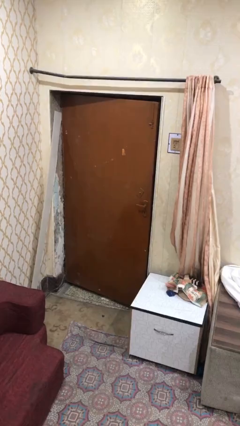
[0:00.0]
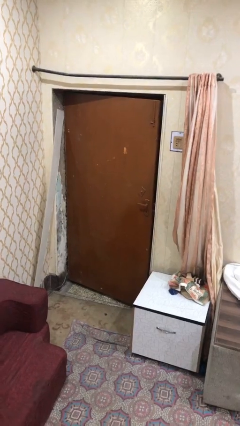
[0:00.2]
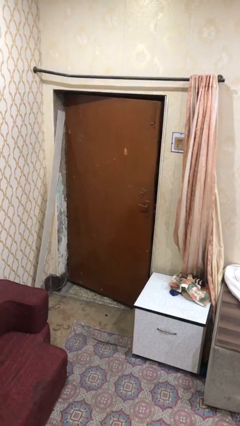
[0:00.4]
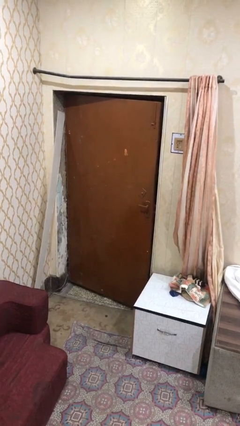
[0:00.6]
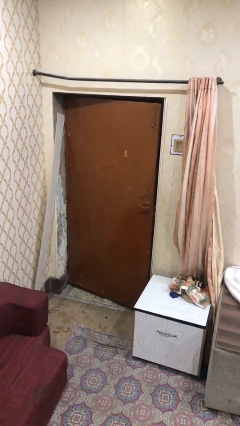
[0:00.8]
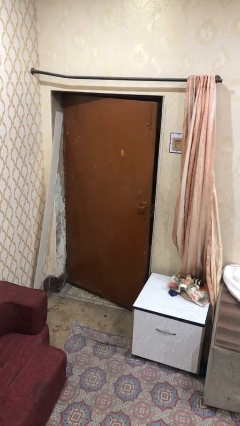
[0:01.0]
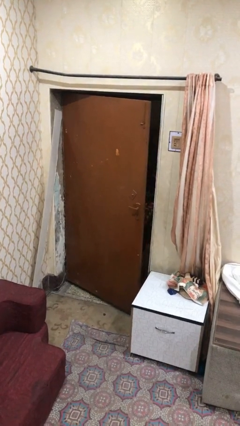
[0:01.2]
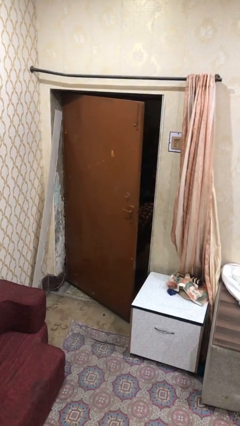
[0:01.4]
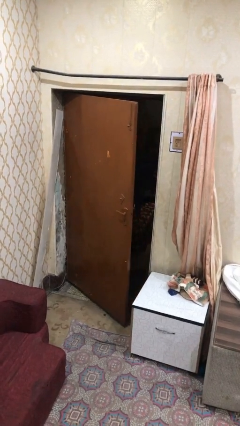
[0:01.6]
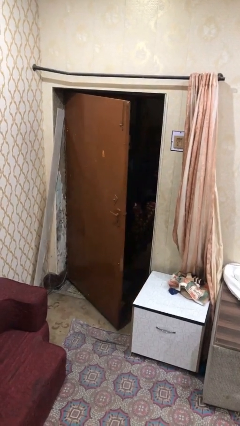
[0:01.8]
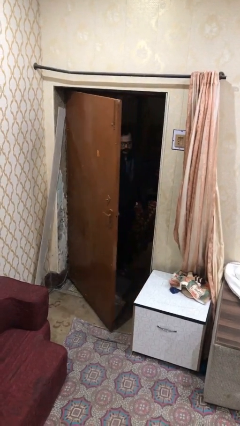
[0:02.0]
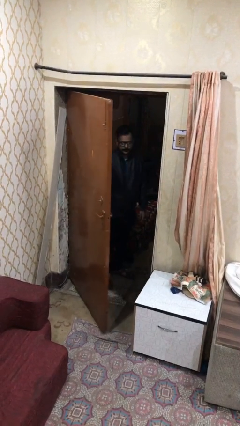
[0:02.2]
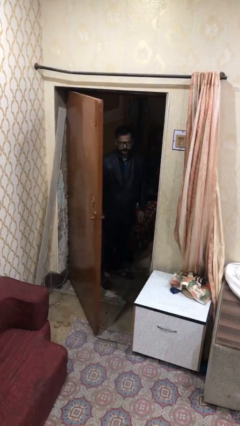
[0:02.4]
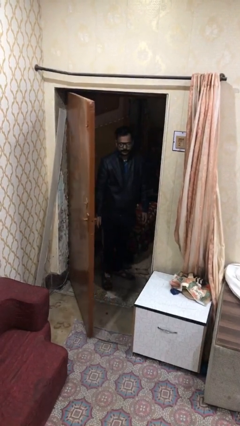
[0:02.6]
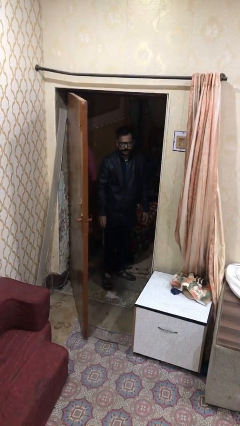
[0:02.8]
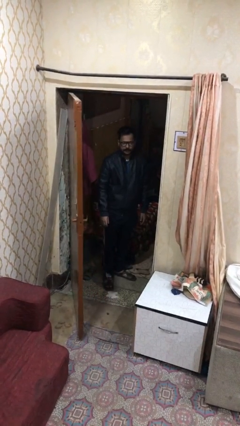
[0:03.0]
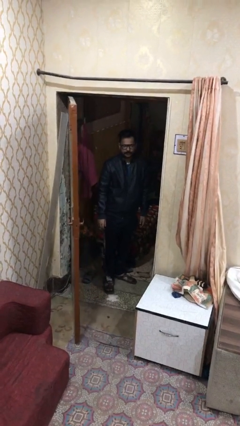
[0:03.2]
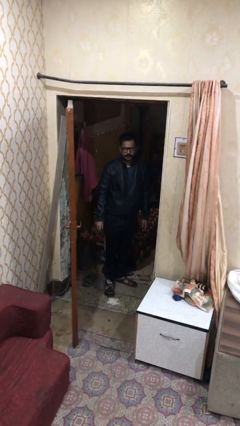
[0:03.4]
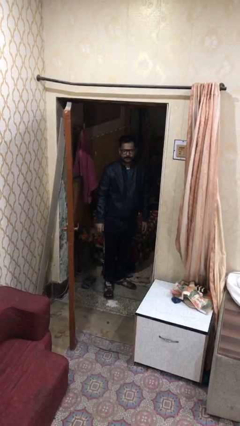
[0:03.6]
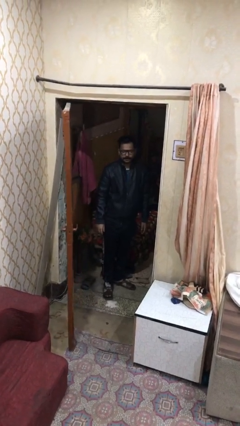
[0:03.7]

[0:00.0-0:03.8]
person opens facility door

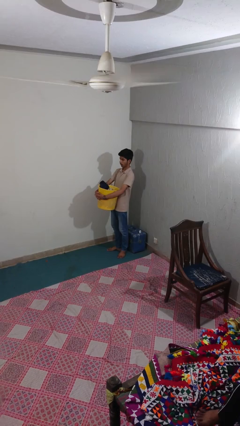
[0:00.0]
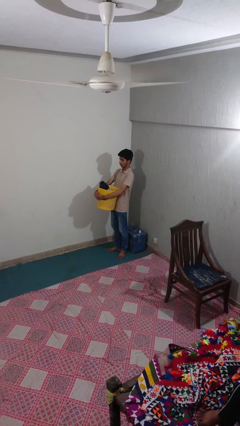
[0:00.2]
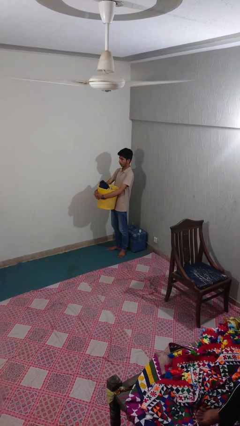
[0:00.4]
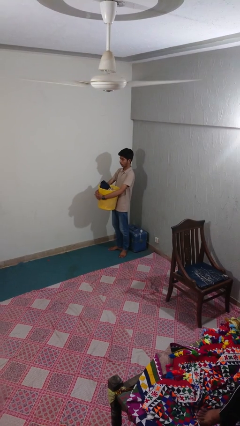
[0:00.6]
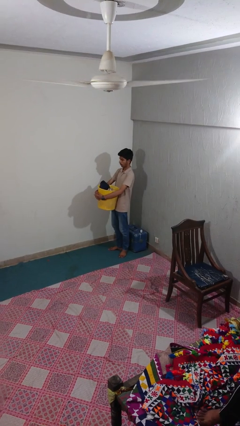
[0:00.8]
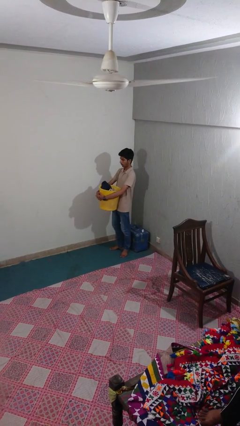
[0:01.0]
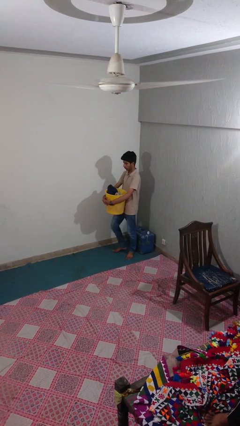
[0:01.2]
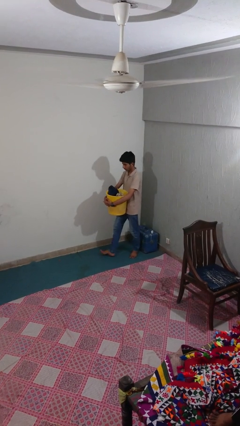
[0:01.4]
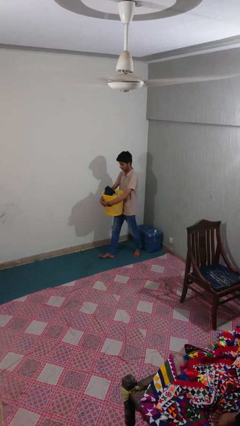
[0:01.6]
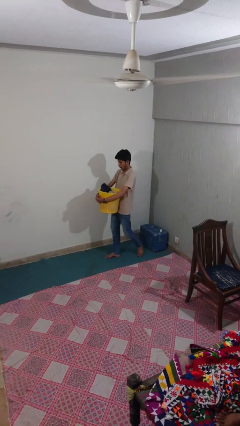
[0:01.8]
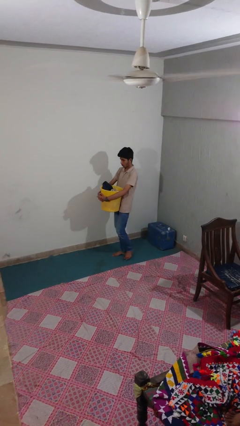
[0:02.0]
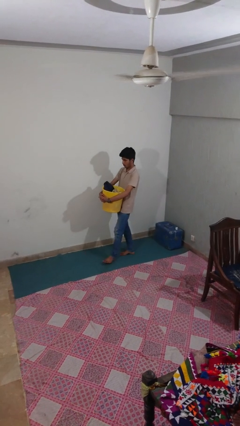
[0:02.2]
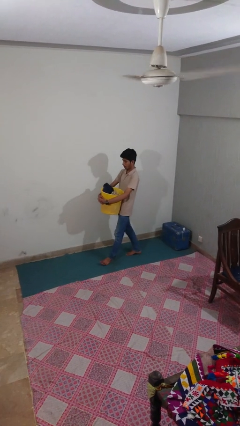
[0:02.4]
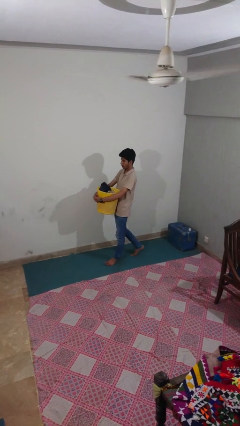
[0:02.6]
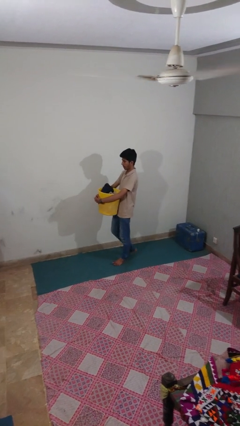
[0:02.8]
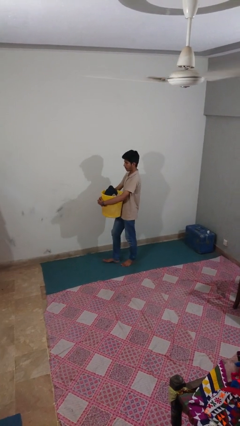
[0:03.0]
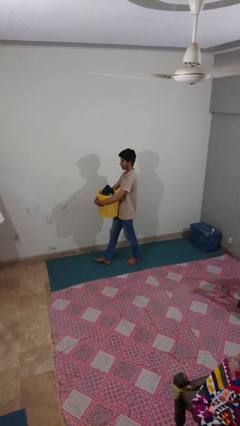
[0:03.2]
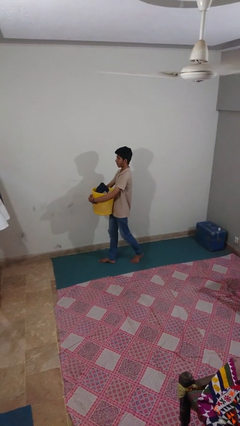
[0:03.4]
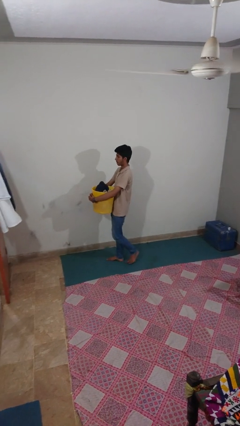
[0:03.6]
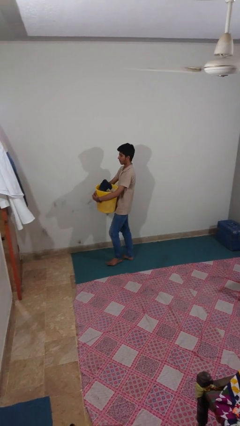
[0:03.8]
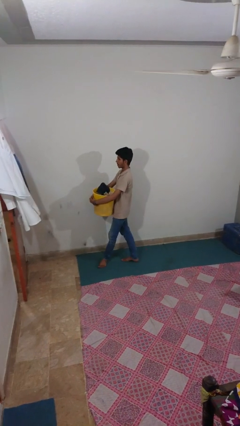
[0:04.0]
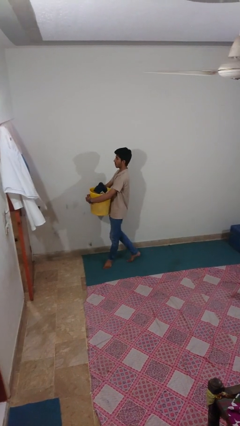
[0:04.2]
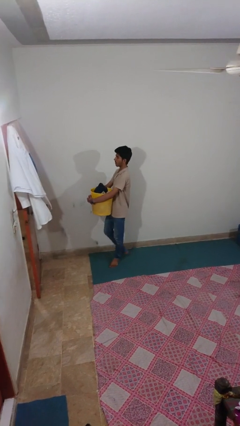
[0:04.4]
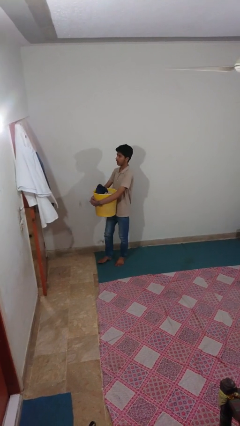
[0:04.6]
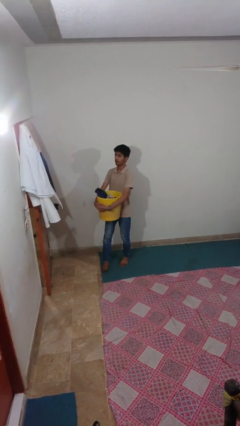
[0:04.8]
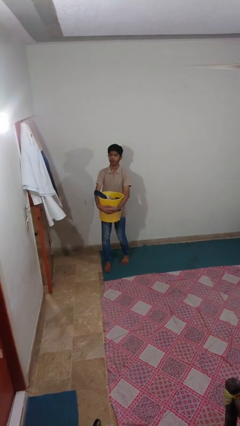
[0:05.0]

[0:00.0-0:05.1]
person carries laundry basket

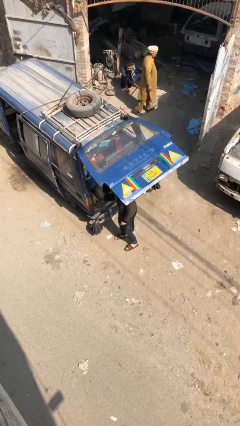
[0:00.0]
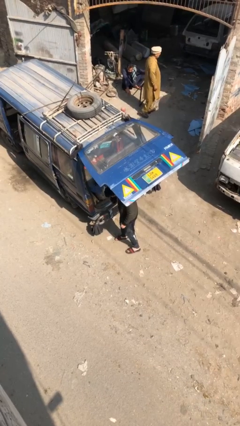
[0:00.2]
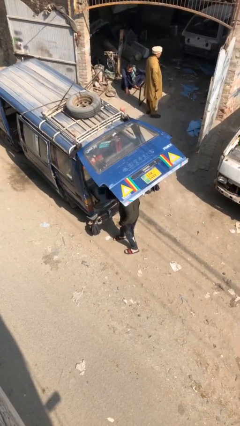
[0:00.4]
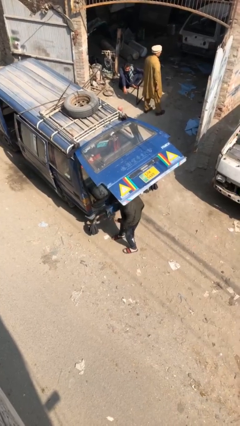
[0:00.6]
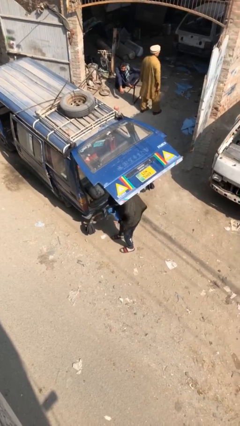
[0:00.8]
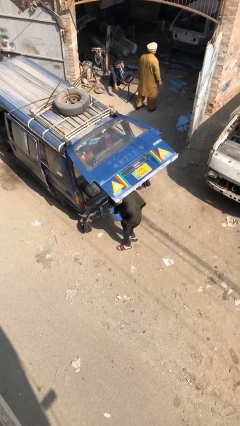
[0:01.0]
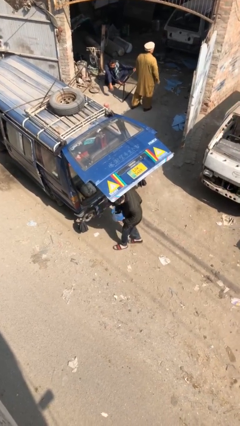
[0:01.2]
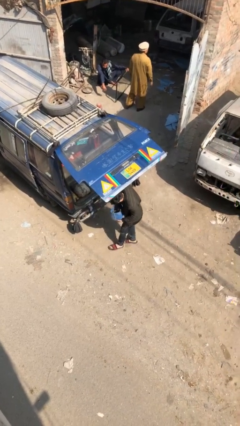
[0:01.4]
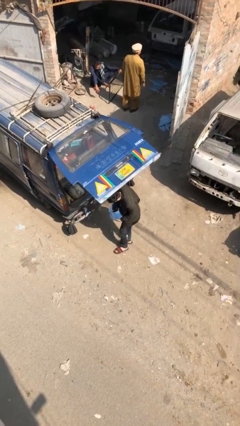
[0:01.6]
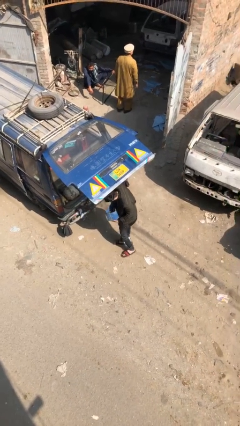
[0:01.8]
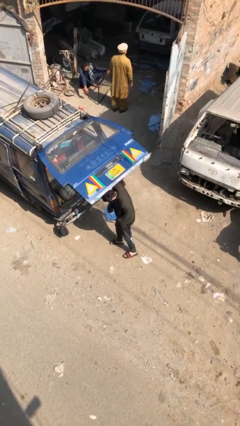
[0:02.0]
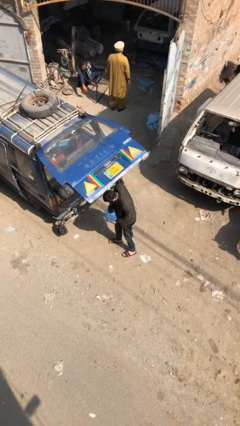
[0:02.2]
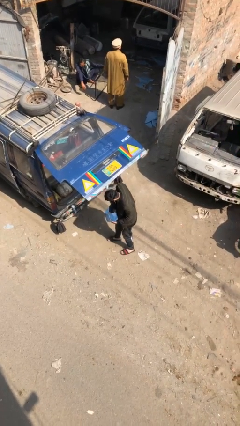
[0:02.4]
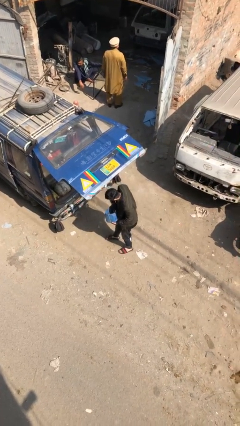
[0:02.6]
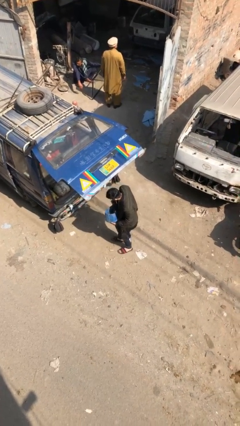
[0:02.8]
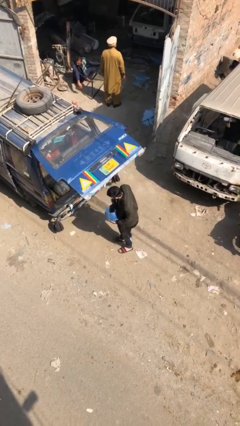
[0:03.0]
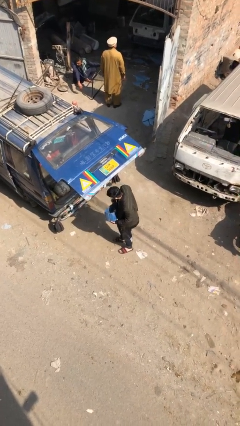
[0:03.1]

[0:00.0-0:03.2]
person unloads car

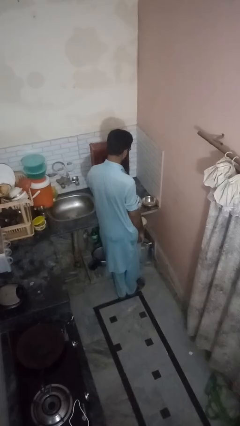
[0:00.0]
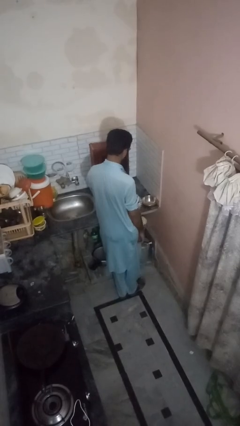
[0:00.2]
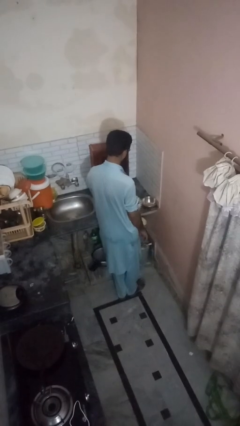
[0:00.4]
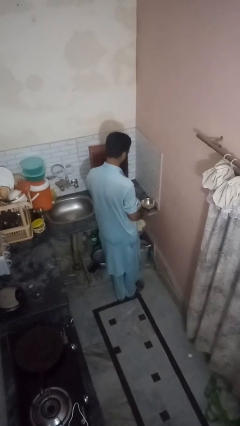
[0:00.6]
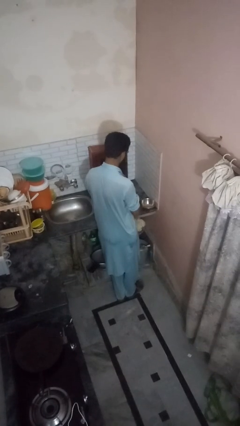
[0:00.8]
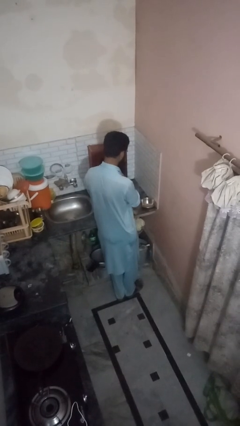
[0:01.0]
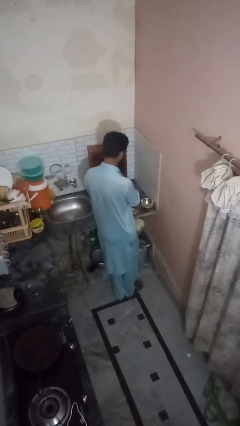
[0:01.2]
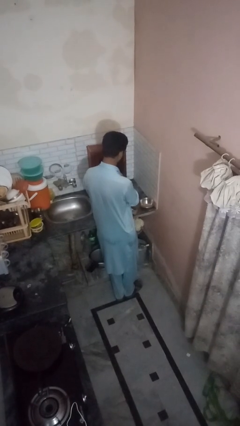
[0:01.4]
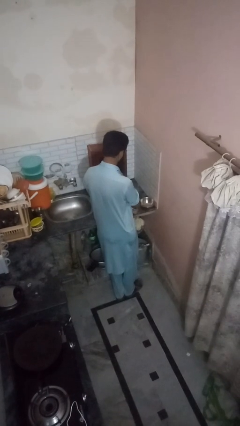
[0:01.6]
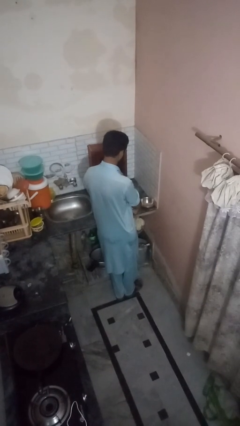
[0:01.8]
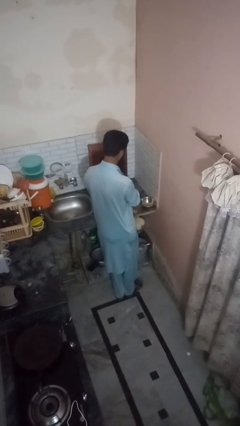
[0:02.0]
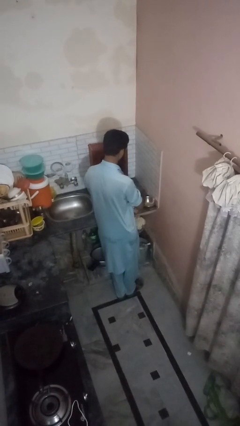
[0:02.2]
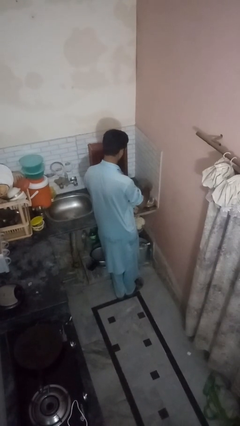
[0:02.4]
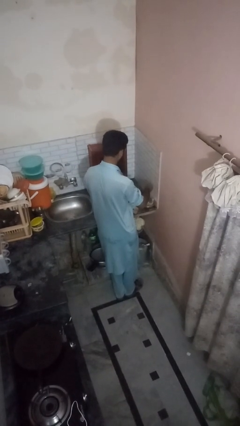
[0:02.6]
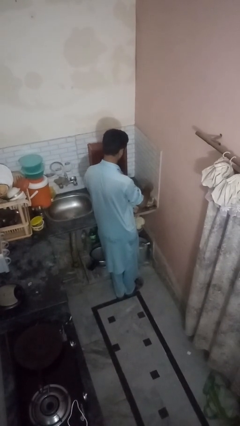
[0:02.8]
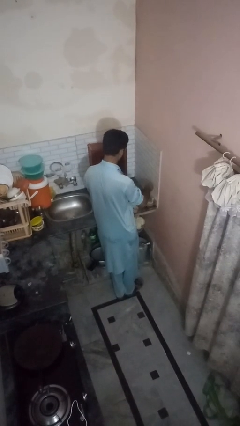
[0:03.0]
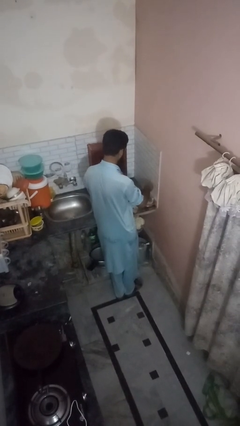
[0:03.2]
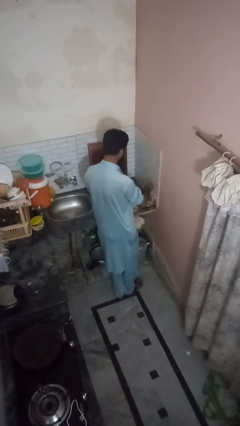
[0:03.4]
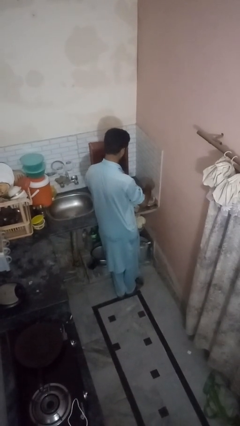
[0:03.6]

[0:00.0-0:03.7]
person pours into bowl

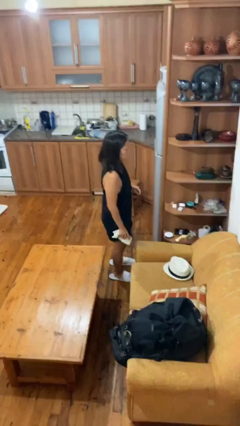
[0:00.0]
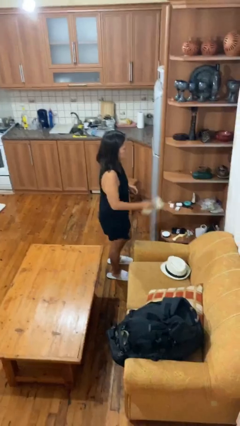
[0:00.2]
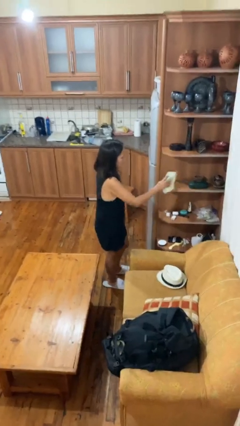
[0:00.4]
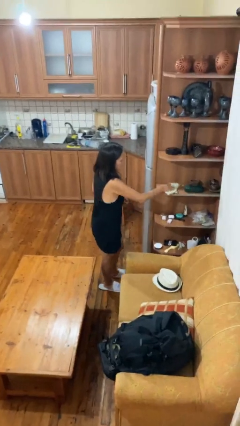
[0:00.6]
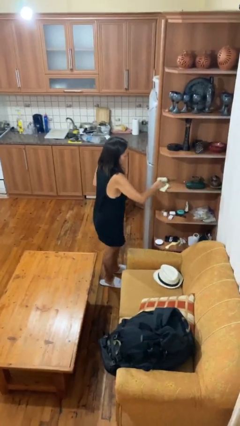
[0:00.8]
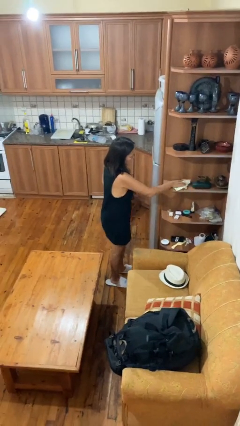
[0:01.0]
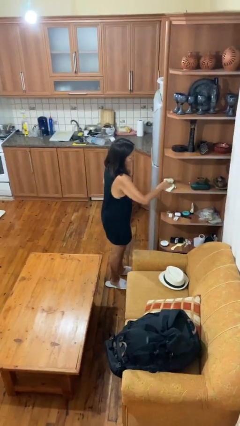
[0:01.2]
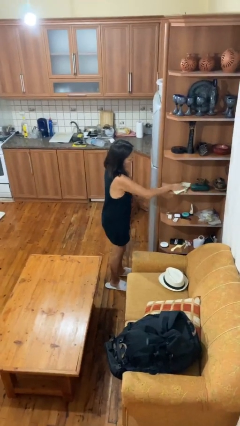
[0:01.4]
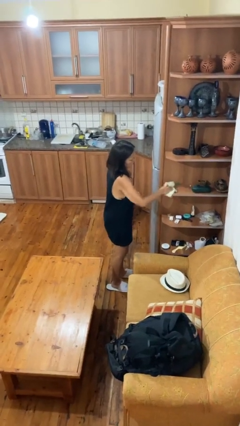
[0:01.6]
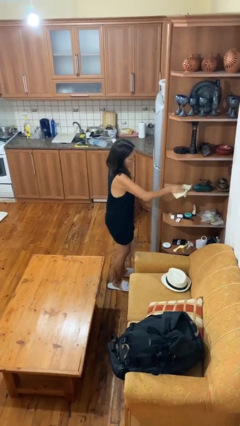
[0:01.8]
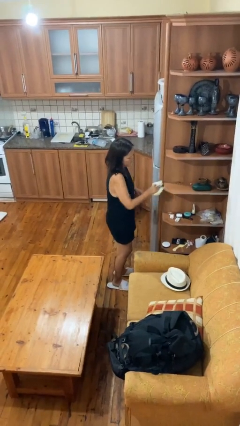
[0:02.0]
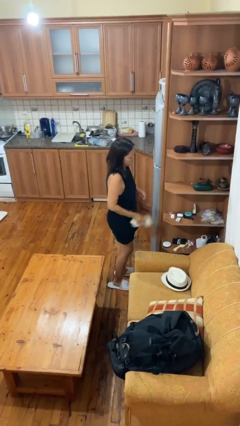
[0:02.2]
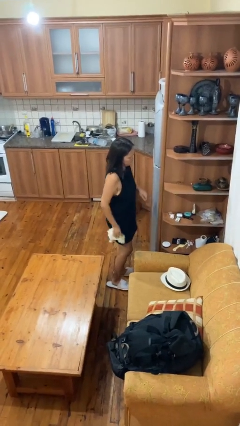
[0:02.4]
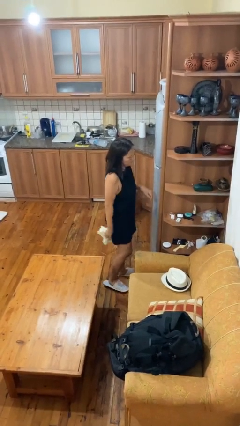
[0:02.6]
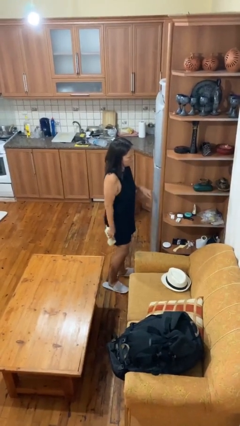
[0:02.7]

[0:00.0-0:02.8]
person dusts furniture
